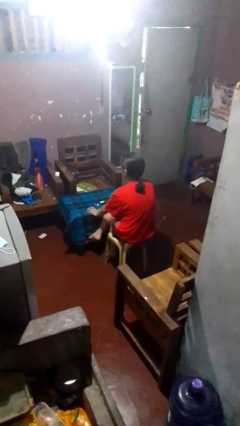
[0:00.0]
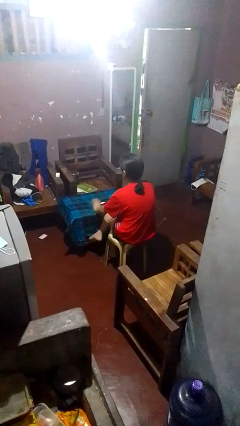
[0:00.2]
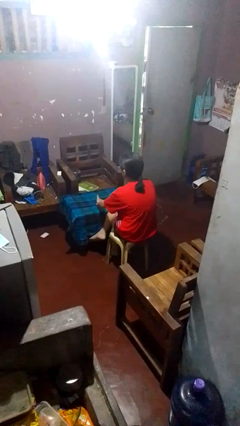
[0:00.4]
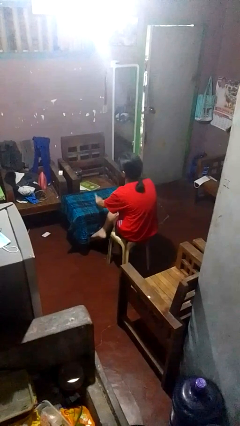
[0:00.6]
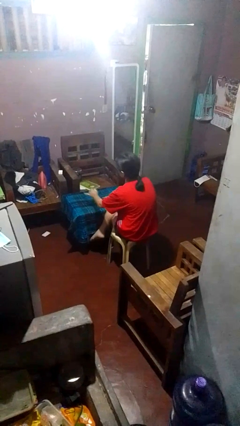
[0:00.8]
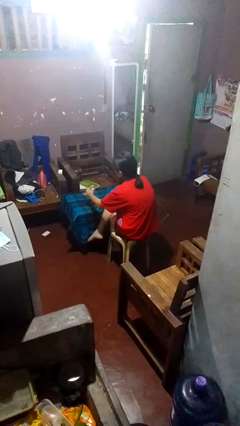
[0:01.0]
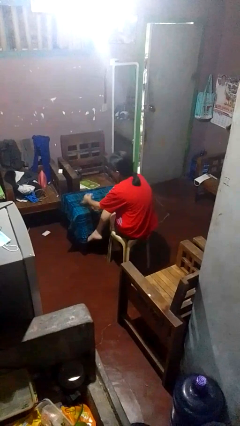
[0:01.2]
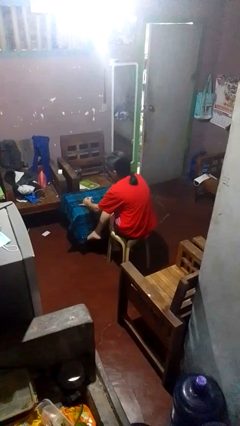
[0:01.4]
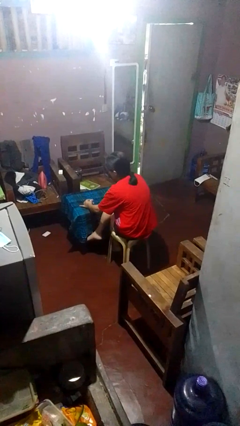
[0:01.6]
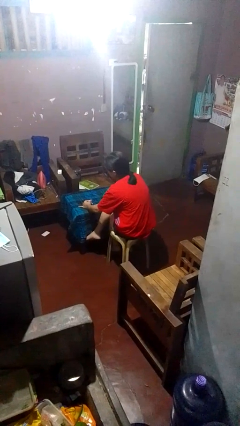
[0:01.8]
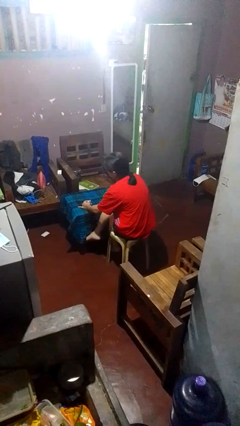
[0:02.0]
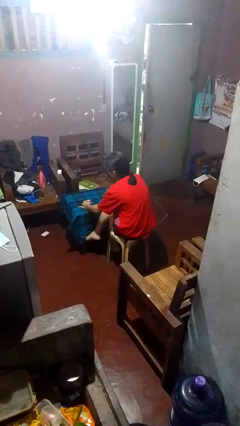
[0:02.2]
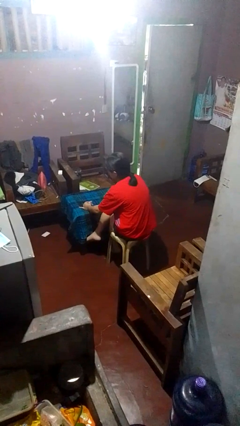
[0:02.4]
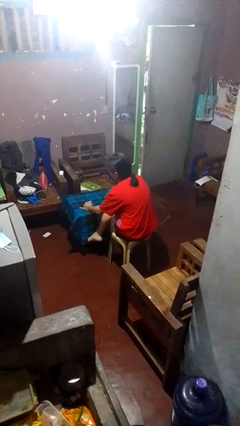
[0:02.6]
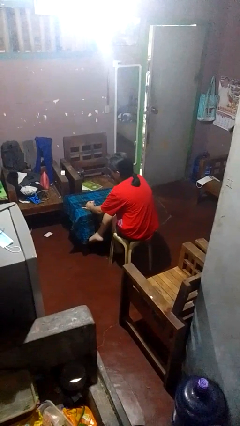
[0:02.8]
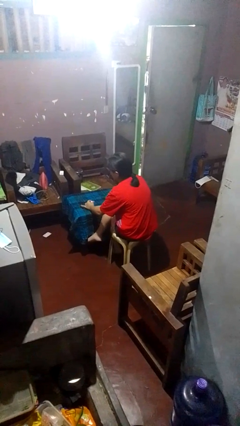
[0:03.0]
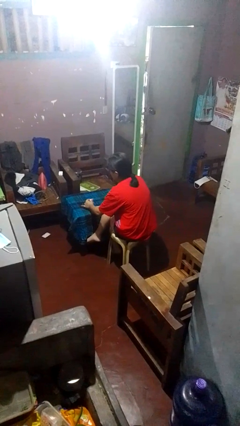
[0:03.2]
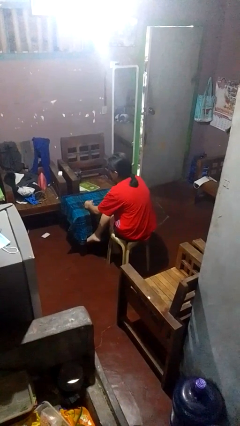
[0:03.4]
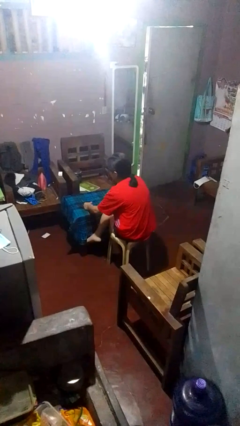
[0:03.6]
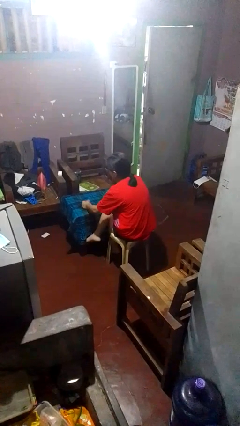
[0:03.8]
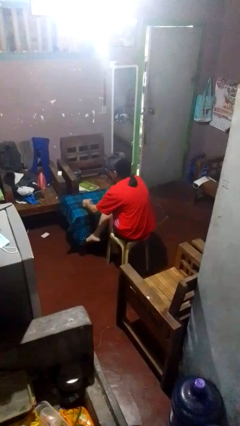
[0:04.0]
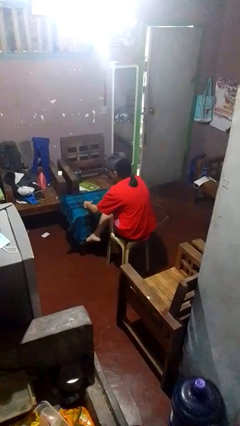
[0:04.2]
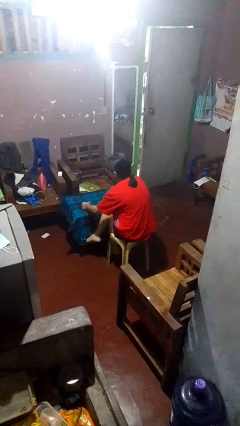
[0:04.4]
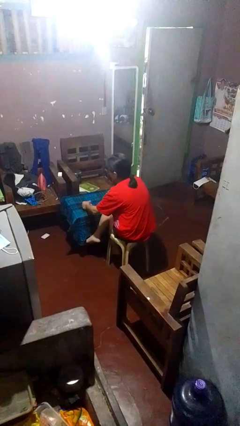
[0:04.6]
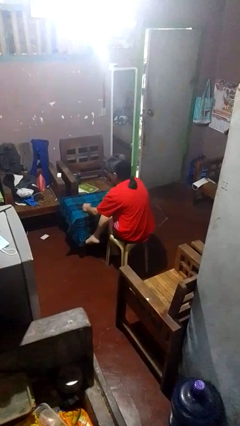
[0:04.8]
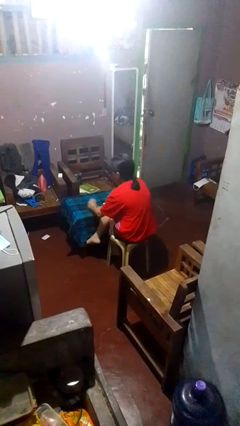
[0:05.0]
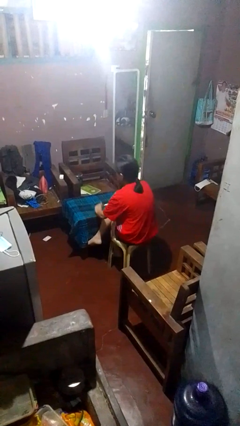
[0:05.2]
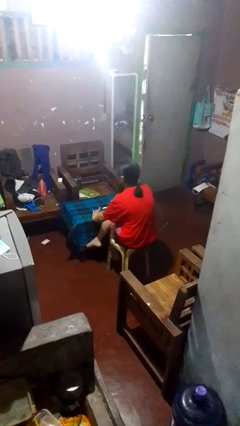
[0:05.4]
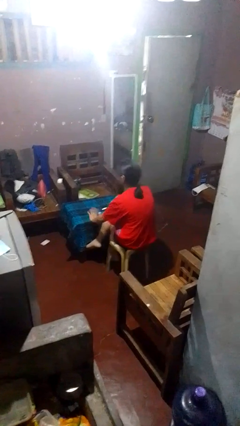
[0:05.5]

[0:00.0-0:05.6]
person paints fingernails

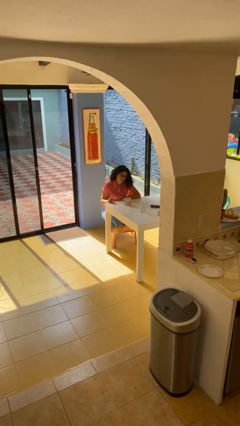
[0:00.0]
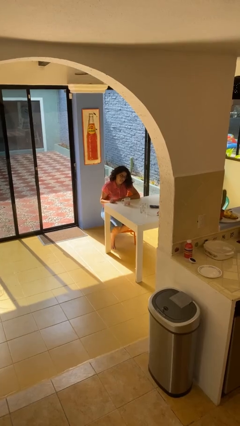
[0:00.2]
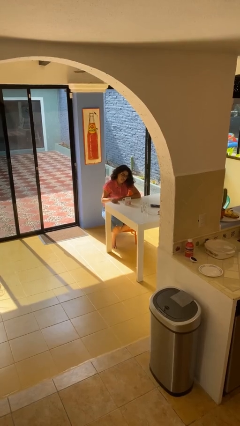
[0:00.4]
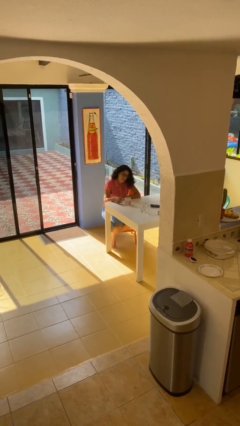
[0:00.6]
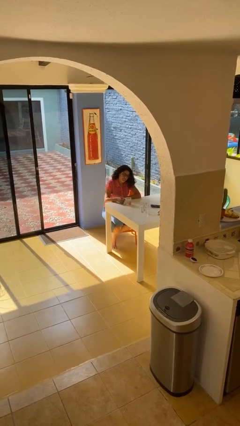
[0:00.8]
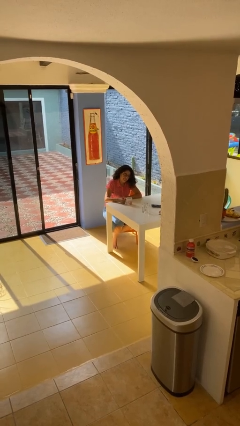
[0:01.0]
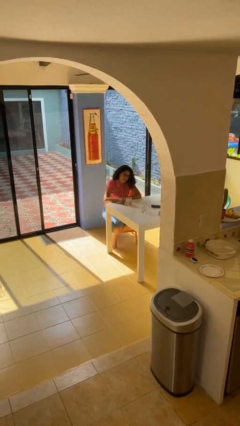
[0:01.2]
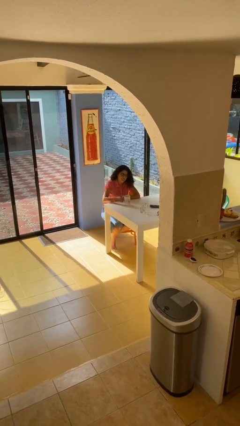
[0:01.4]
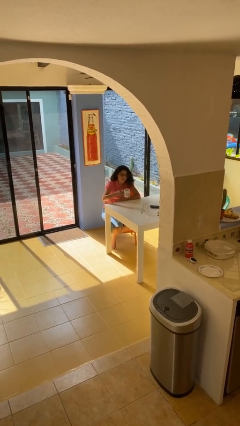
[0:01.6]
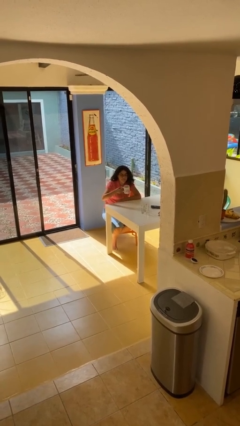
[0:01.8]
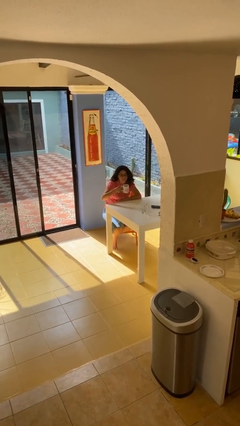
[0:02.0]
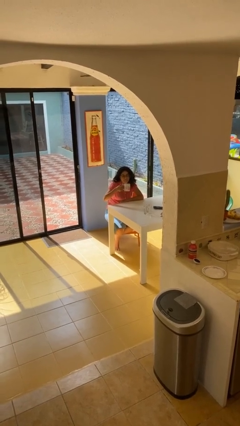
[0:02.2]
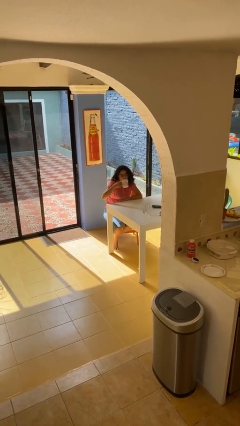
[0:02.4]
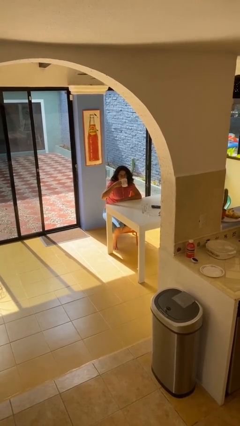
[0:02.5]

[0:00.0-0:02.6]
person picks up object from table

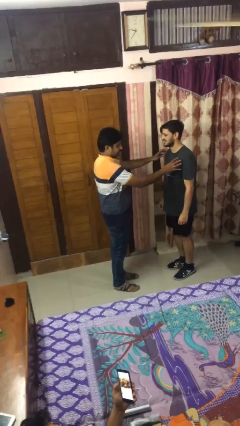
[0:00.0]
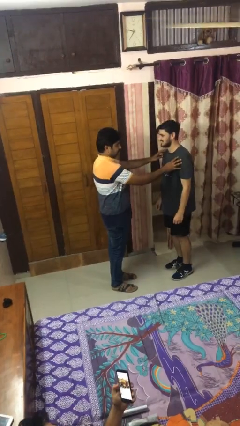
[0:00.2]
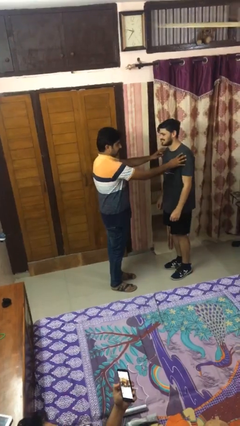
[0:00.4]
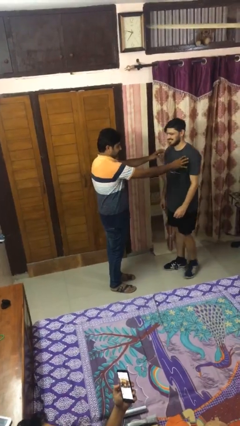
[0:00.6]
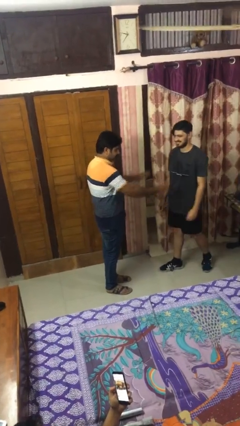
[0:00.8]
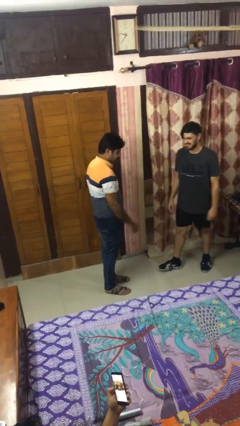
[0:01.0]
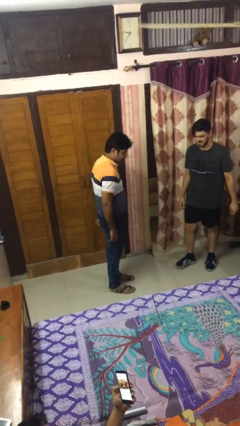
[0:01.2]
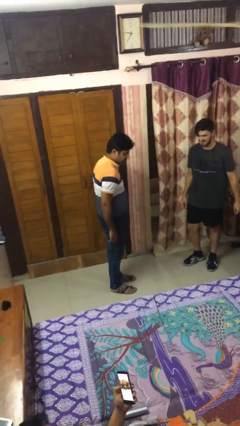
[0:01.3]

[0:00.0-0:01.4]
person shoves person

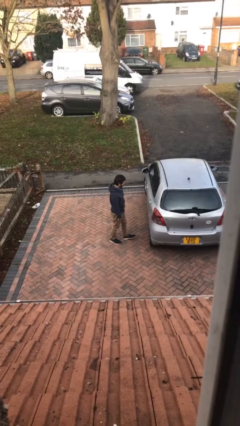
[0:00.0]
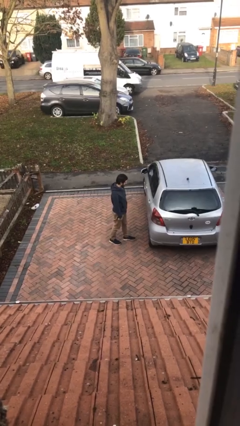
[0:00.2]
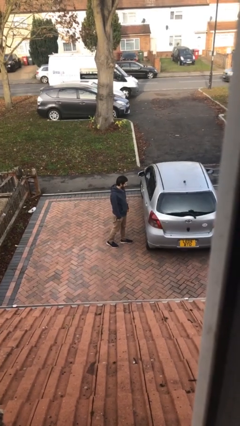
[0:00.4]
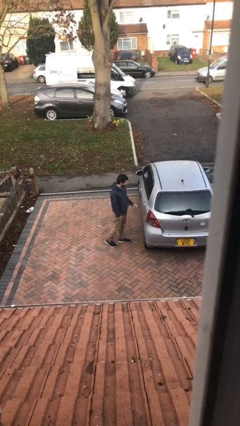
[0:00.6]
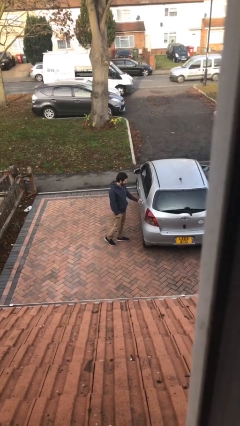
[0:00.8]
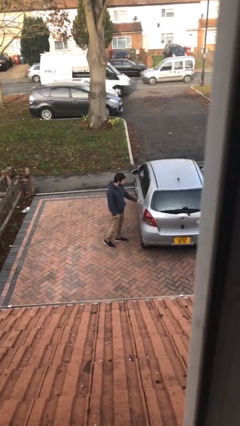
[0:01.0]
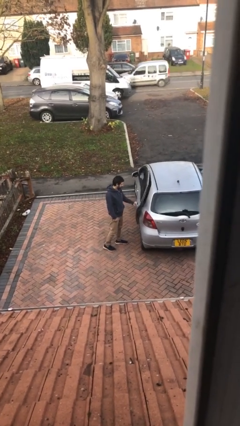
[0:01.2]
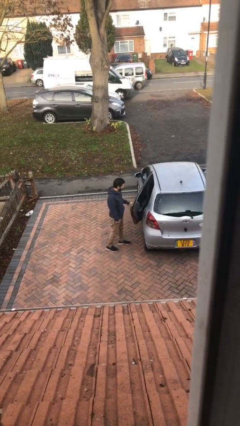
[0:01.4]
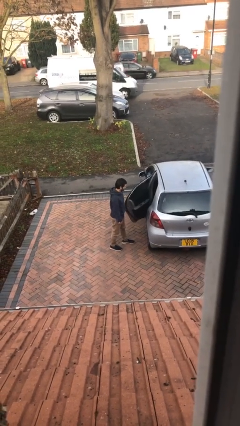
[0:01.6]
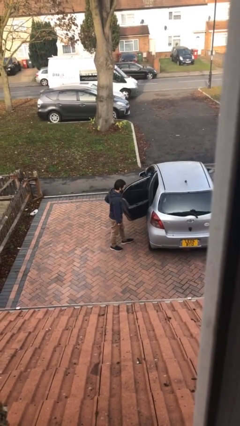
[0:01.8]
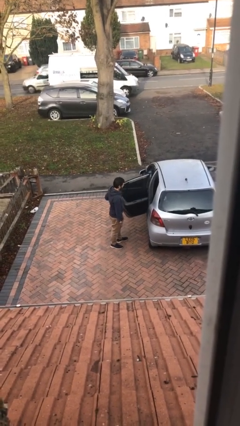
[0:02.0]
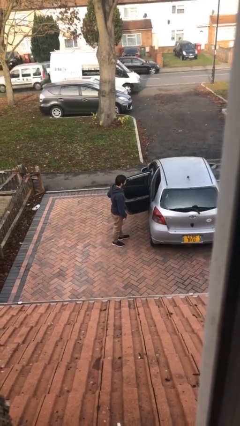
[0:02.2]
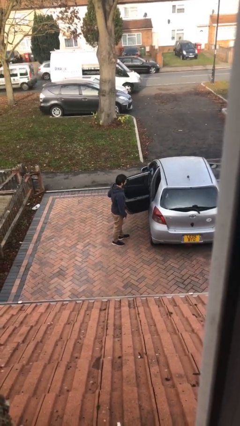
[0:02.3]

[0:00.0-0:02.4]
person opens car door

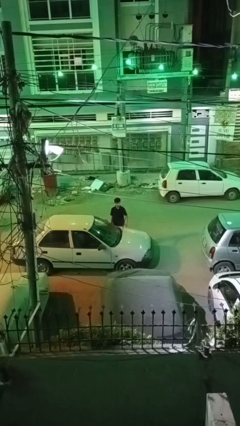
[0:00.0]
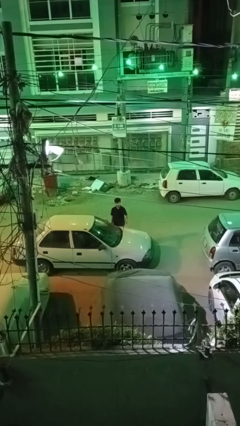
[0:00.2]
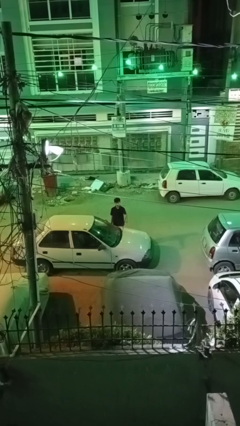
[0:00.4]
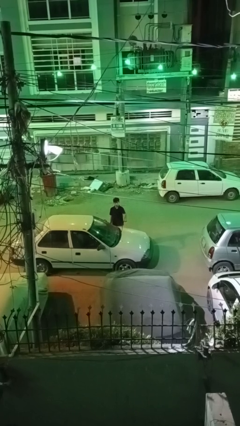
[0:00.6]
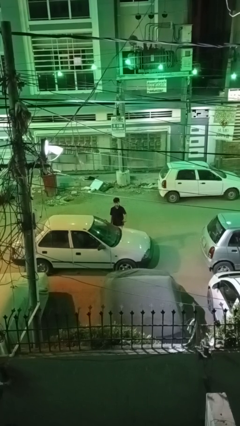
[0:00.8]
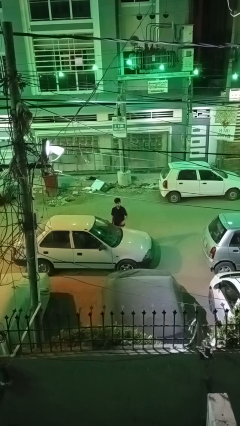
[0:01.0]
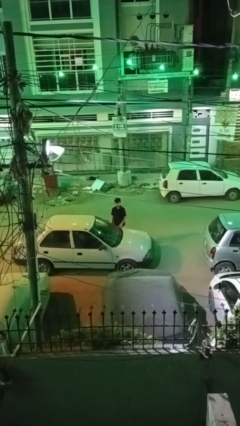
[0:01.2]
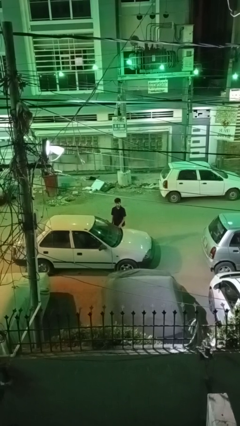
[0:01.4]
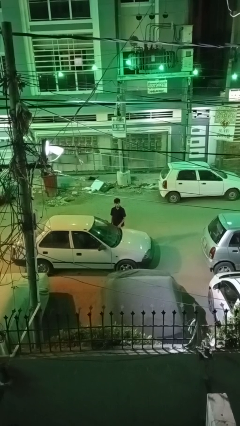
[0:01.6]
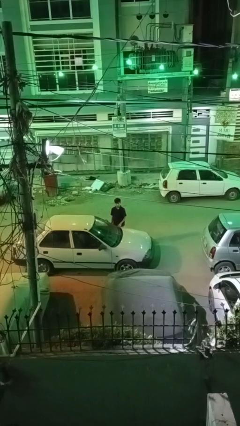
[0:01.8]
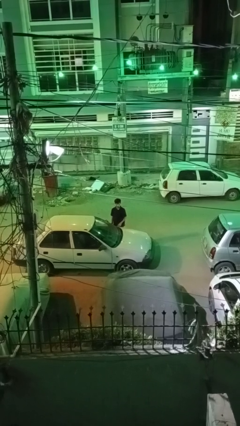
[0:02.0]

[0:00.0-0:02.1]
person flips down car wipers

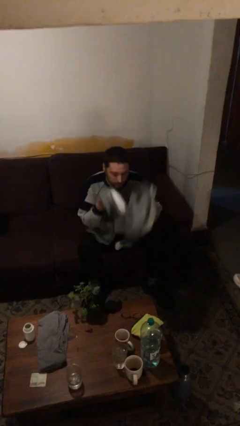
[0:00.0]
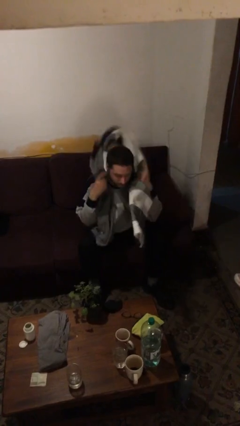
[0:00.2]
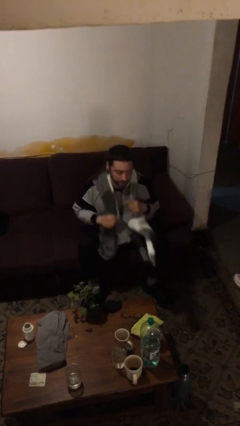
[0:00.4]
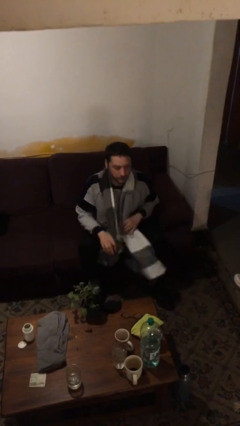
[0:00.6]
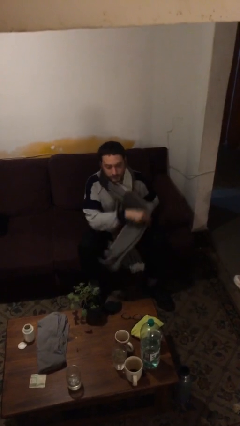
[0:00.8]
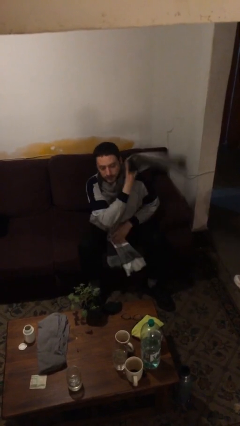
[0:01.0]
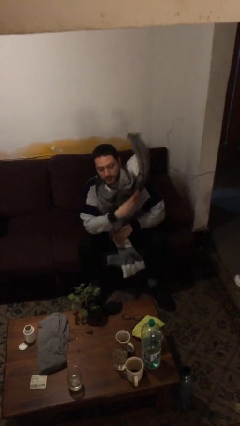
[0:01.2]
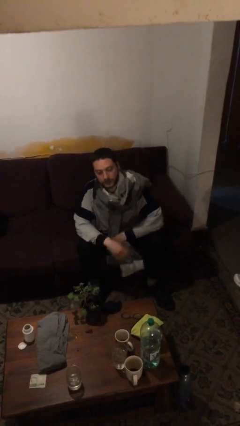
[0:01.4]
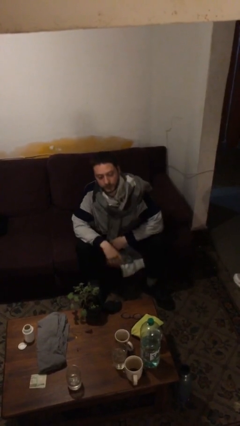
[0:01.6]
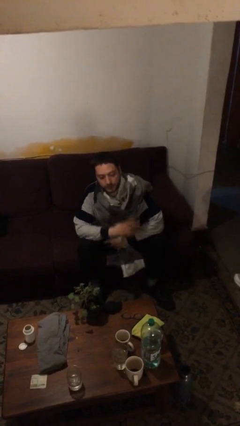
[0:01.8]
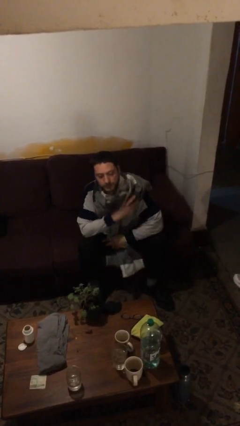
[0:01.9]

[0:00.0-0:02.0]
person puts on scarf

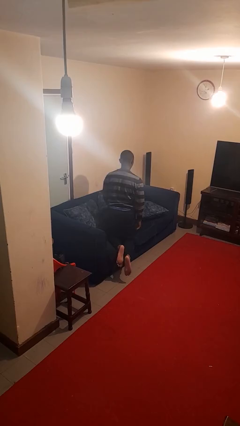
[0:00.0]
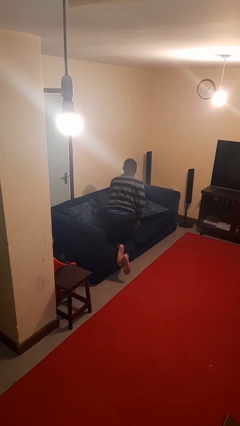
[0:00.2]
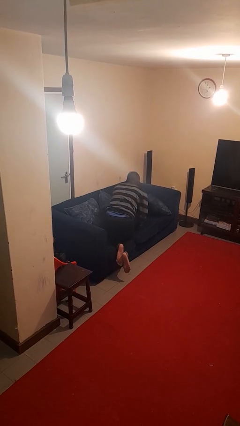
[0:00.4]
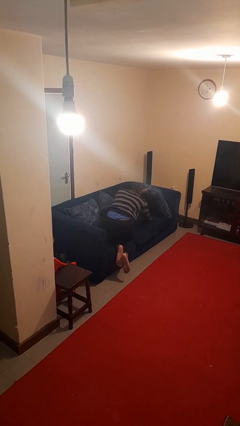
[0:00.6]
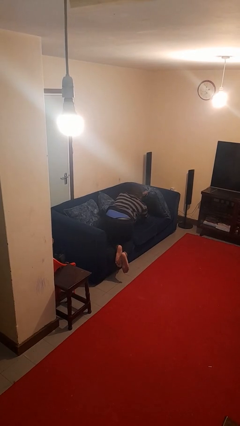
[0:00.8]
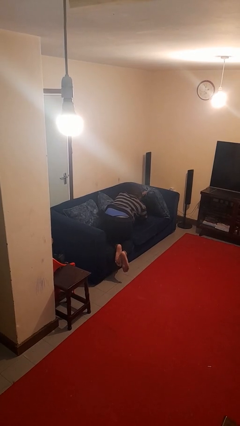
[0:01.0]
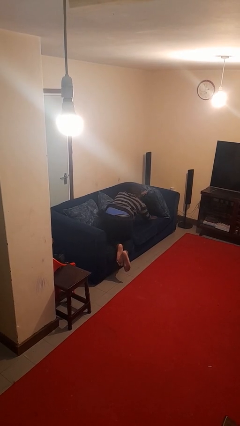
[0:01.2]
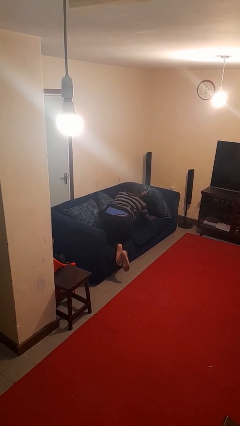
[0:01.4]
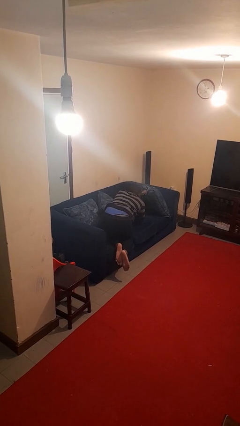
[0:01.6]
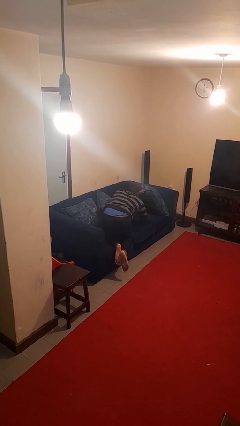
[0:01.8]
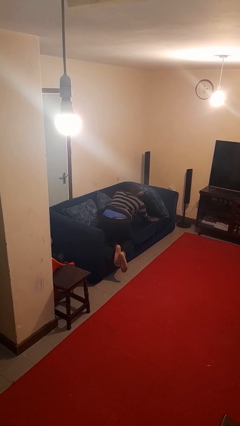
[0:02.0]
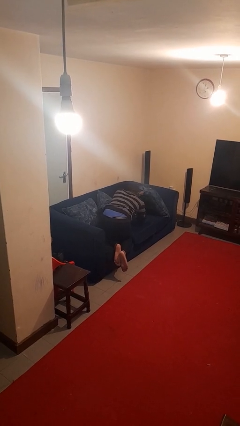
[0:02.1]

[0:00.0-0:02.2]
person searches in couch
